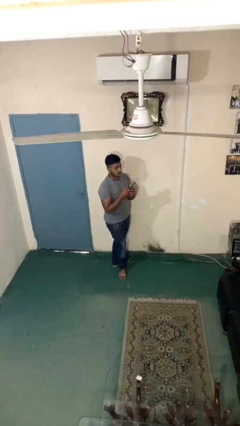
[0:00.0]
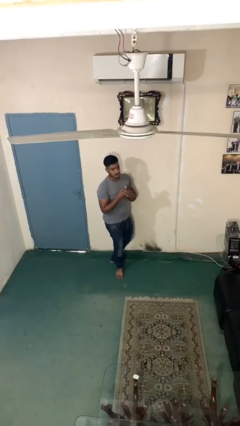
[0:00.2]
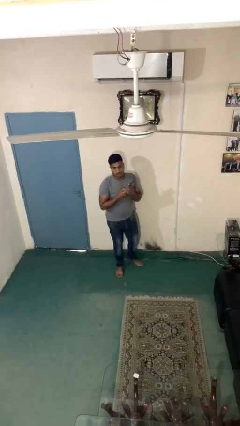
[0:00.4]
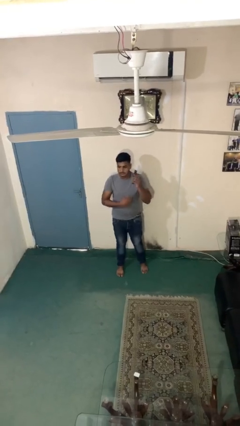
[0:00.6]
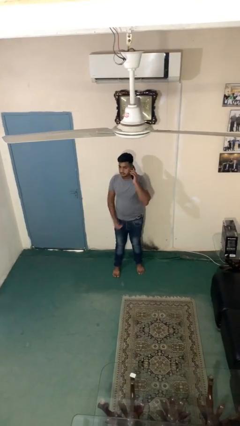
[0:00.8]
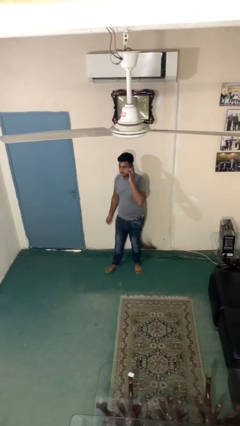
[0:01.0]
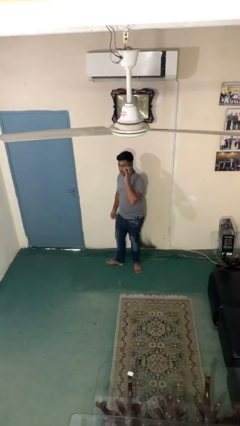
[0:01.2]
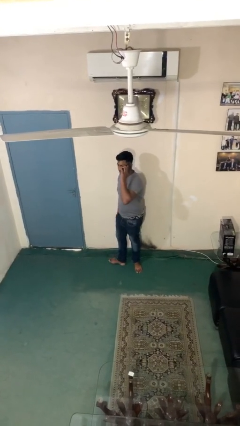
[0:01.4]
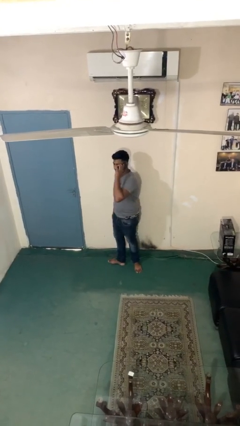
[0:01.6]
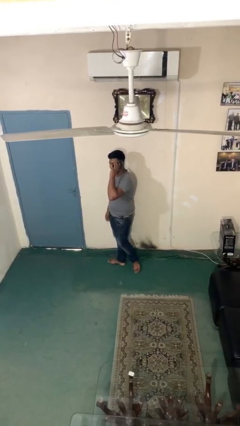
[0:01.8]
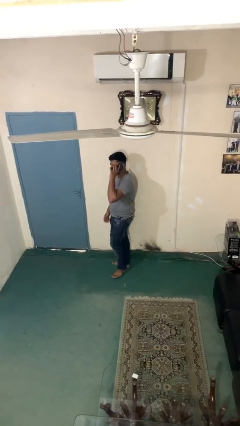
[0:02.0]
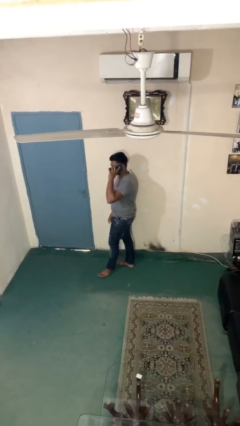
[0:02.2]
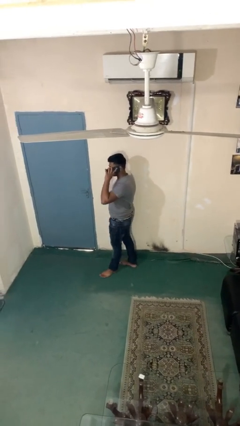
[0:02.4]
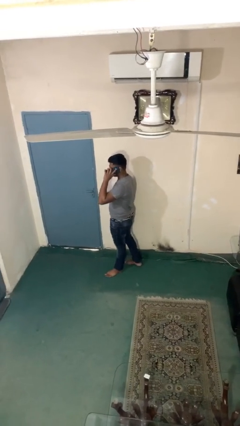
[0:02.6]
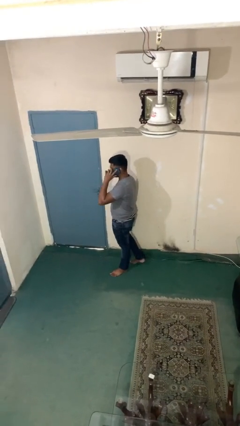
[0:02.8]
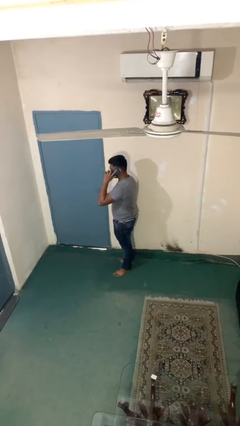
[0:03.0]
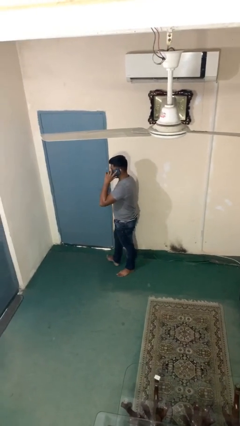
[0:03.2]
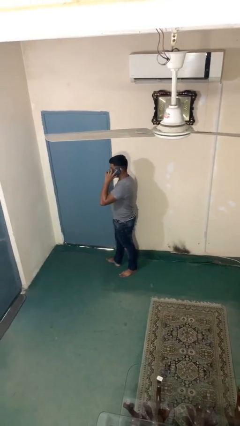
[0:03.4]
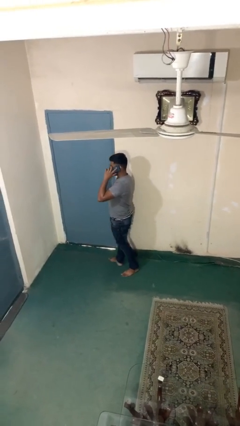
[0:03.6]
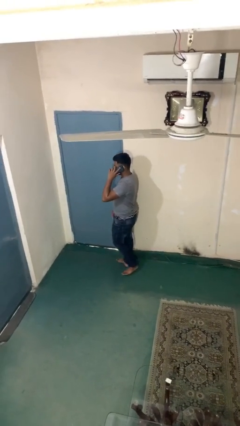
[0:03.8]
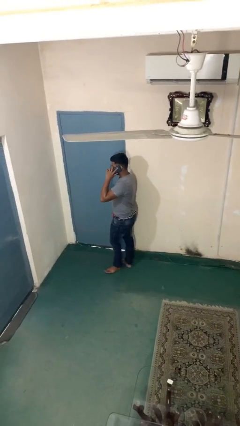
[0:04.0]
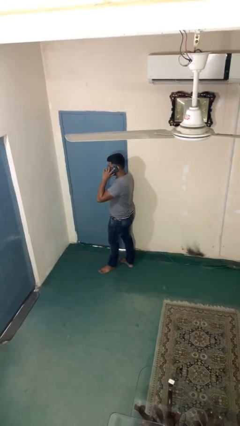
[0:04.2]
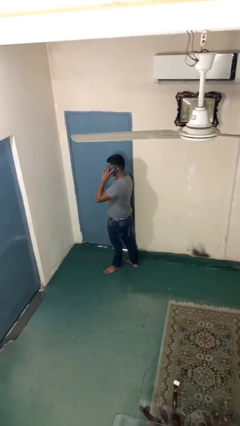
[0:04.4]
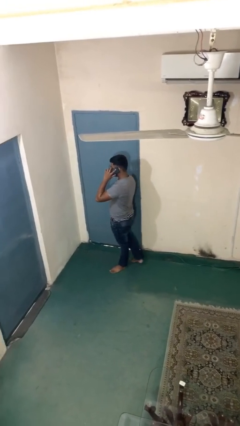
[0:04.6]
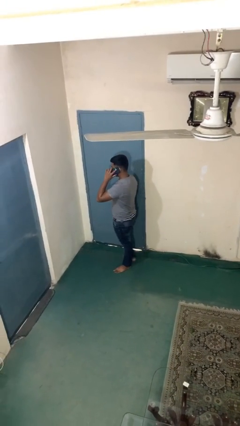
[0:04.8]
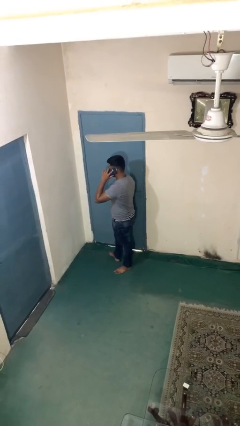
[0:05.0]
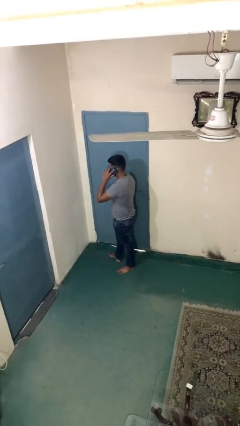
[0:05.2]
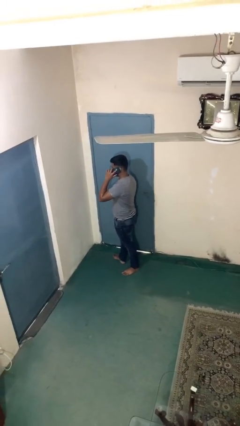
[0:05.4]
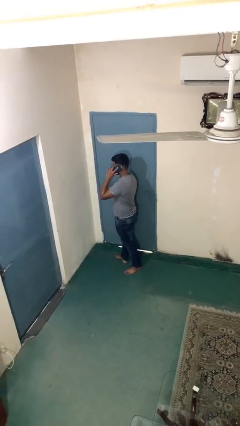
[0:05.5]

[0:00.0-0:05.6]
person talks on phone

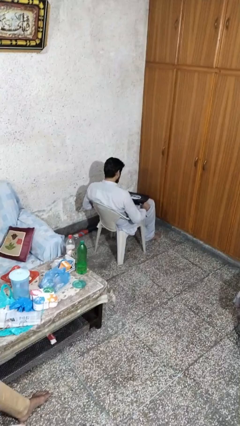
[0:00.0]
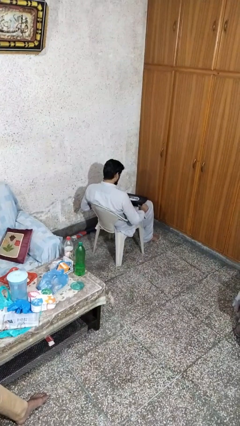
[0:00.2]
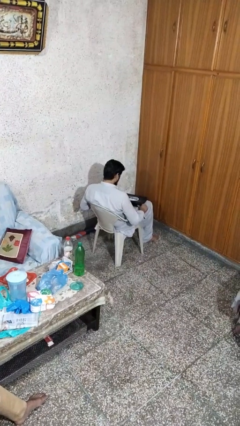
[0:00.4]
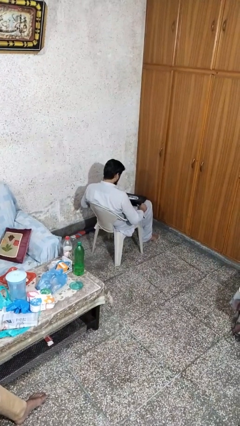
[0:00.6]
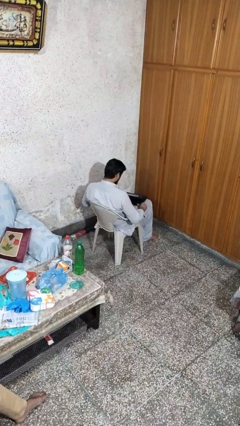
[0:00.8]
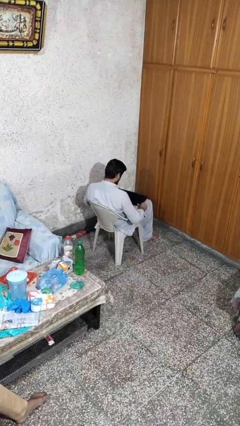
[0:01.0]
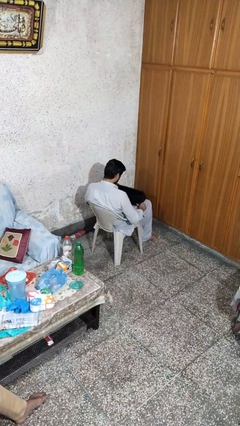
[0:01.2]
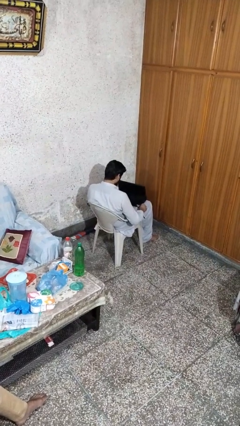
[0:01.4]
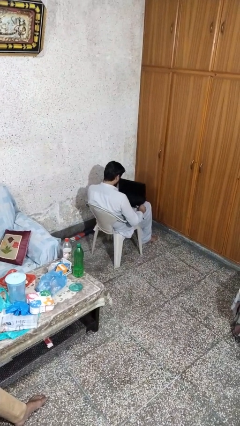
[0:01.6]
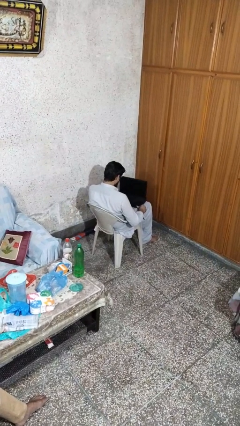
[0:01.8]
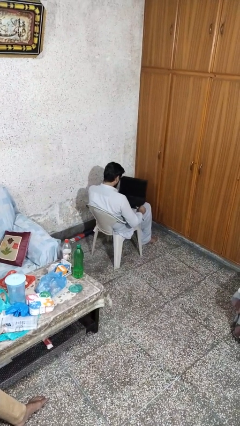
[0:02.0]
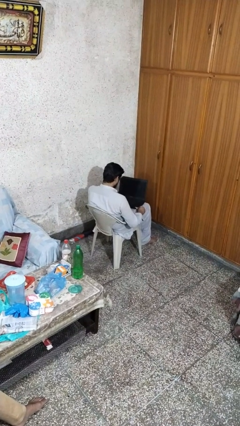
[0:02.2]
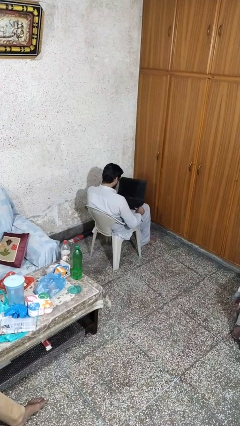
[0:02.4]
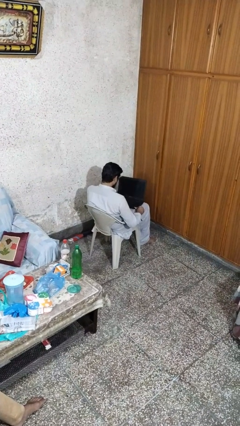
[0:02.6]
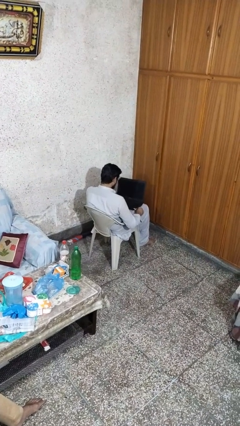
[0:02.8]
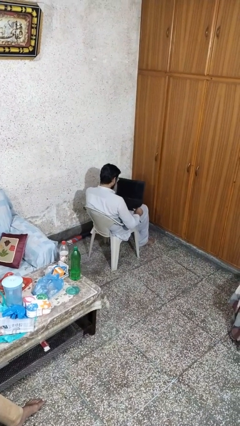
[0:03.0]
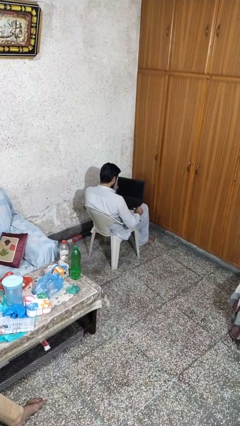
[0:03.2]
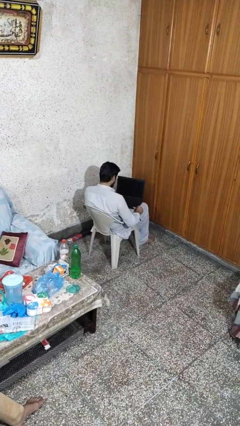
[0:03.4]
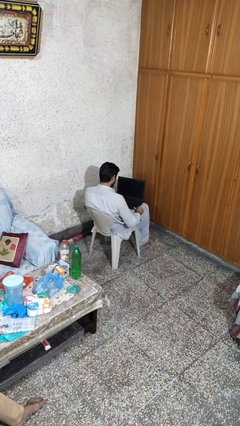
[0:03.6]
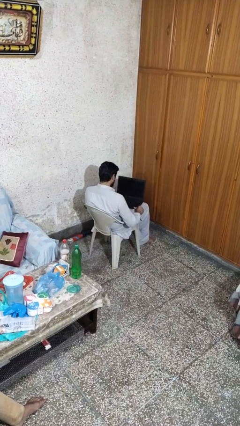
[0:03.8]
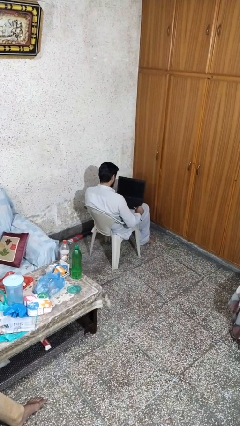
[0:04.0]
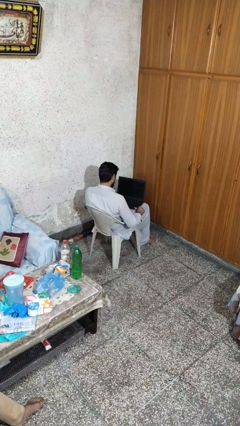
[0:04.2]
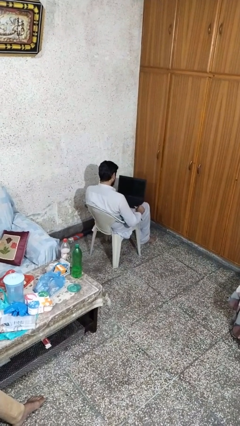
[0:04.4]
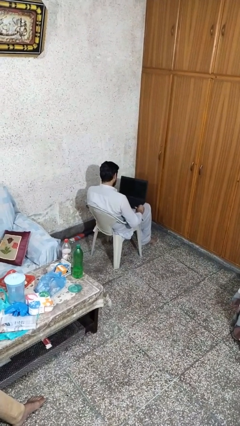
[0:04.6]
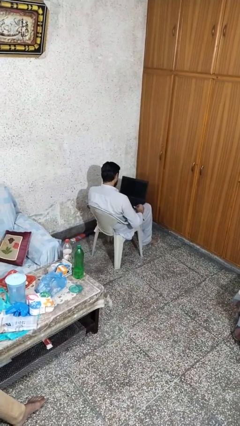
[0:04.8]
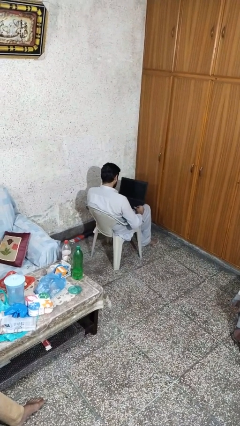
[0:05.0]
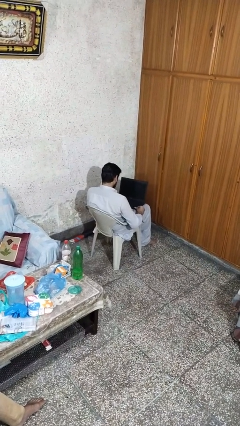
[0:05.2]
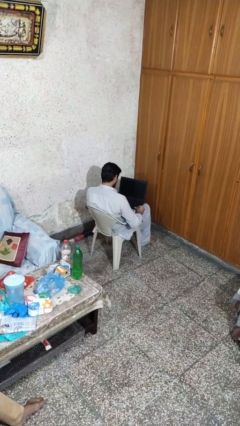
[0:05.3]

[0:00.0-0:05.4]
person opens laptop

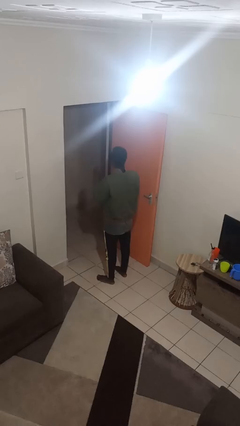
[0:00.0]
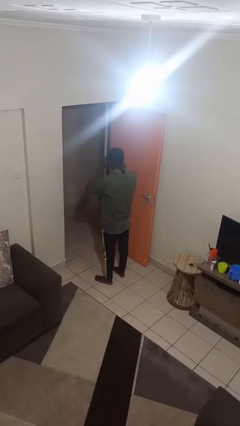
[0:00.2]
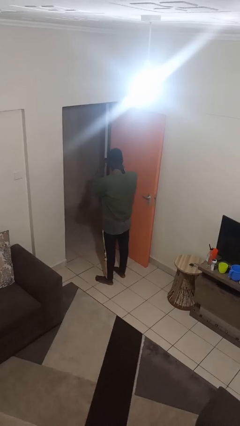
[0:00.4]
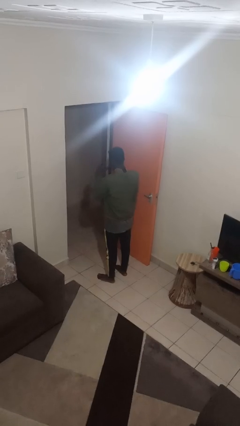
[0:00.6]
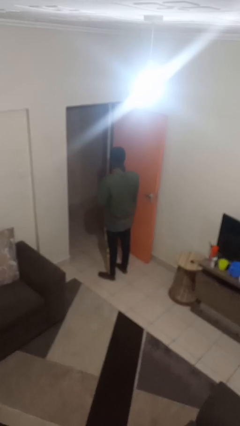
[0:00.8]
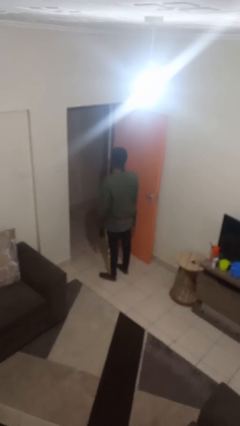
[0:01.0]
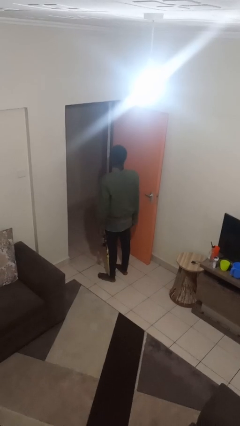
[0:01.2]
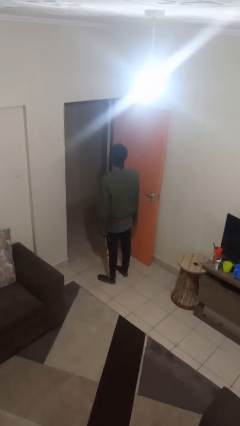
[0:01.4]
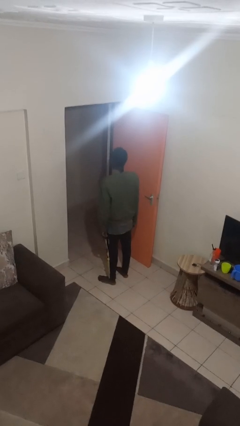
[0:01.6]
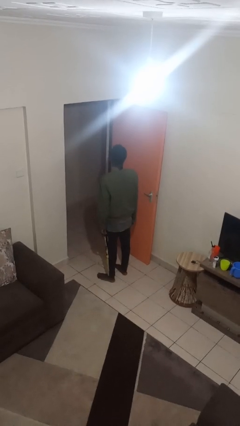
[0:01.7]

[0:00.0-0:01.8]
person takes off sunglasses

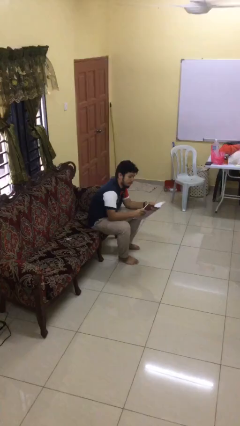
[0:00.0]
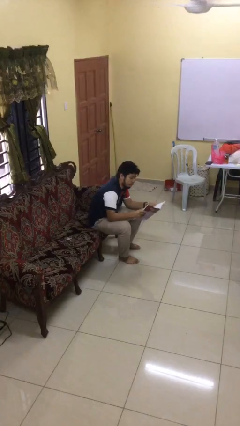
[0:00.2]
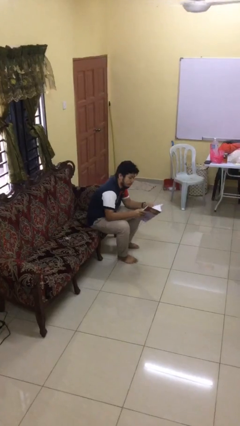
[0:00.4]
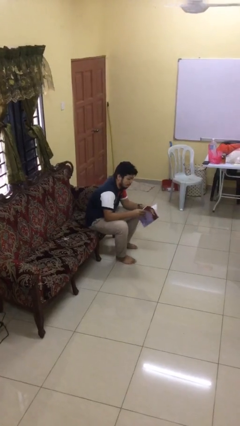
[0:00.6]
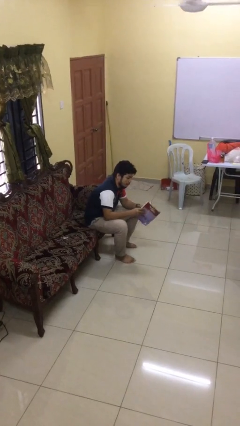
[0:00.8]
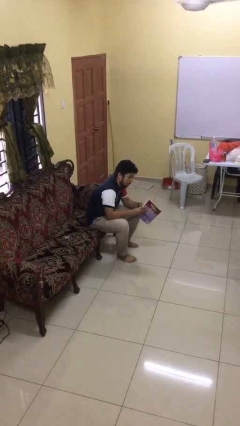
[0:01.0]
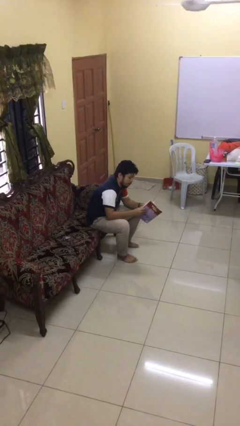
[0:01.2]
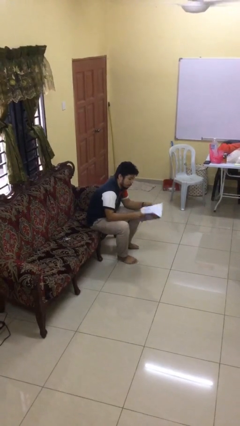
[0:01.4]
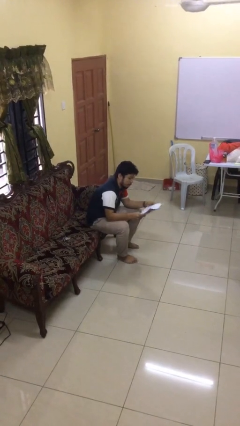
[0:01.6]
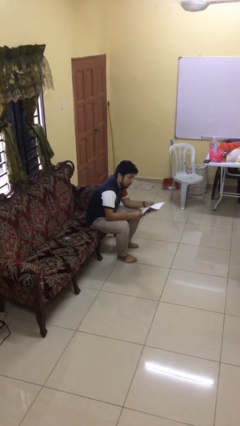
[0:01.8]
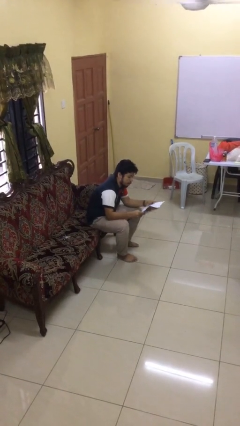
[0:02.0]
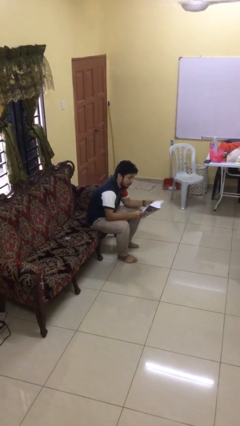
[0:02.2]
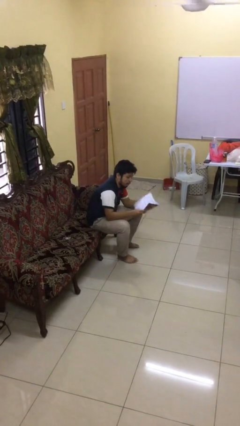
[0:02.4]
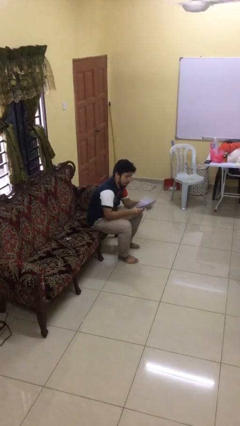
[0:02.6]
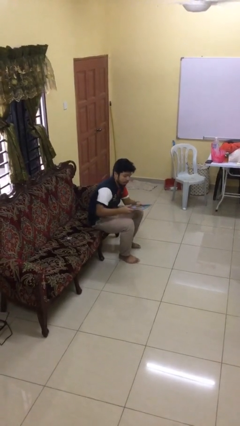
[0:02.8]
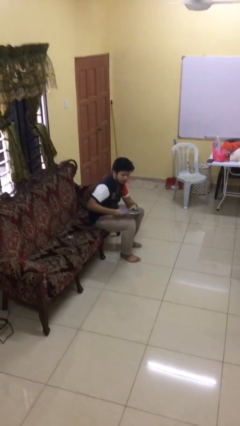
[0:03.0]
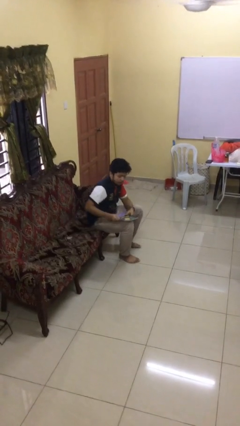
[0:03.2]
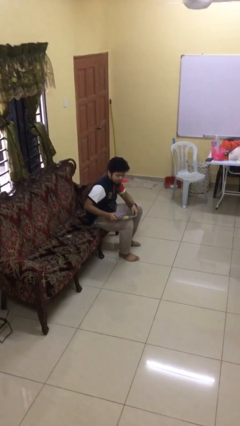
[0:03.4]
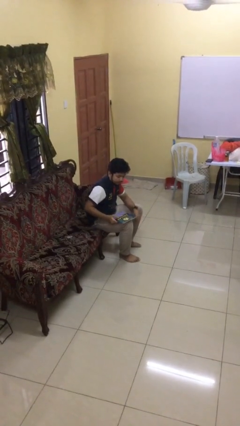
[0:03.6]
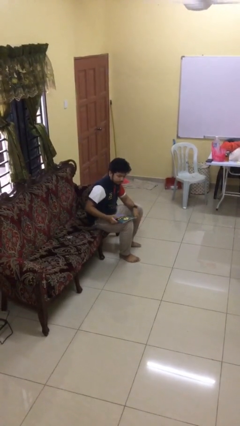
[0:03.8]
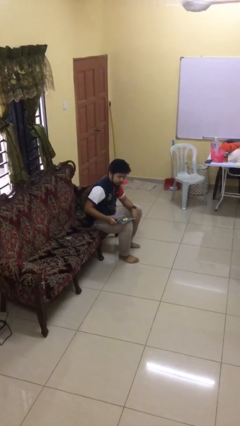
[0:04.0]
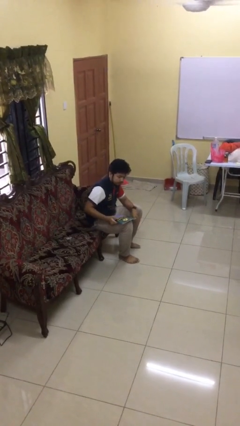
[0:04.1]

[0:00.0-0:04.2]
person reads magazine

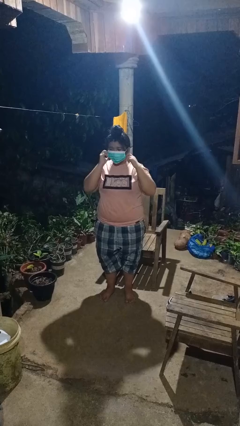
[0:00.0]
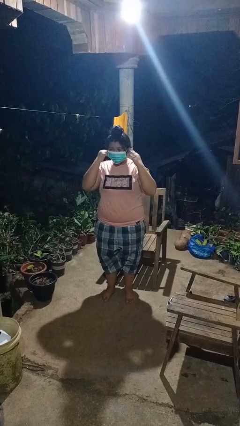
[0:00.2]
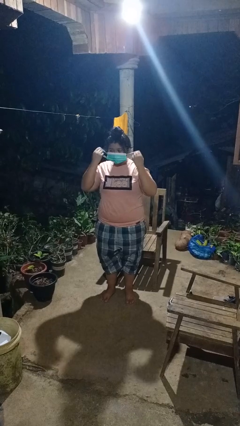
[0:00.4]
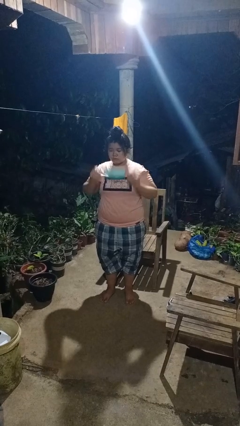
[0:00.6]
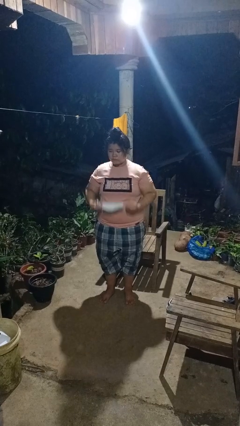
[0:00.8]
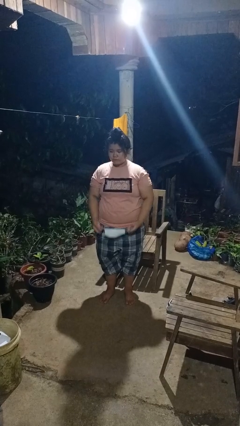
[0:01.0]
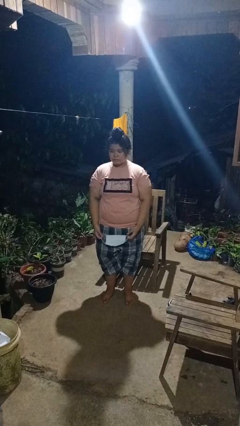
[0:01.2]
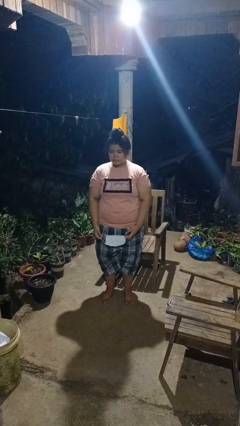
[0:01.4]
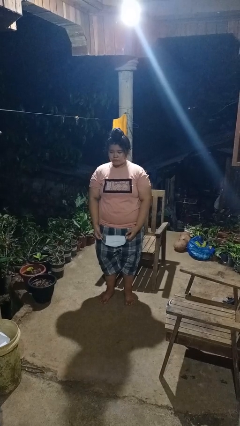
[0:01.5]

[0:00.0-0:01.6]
person takes off facemask
